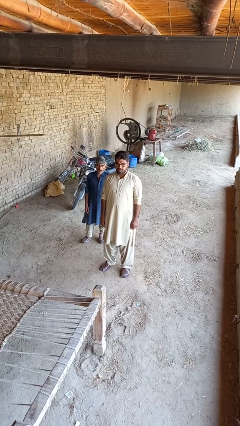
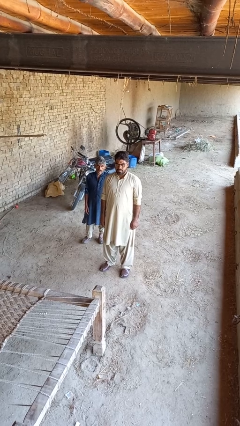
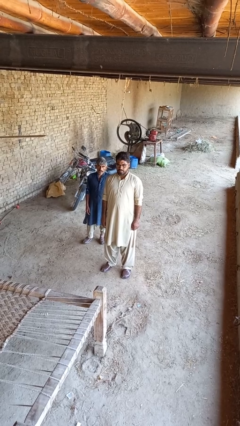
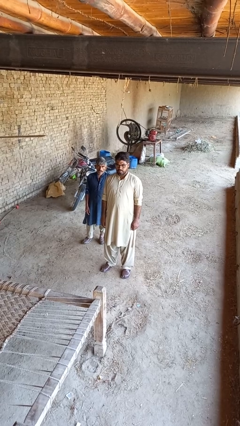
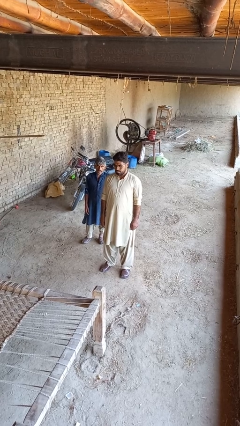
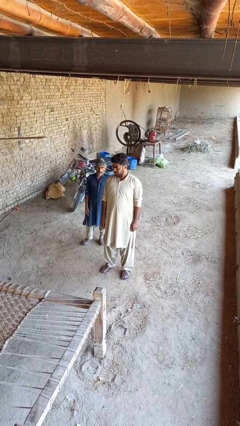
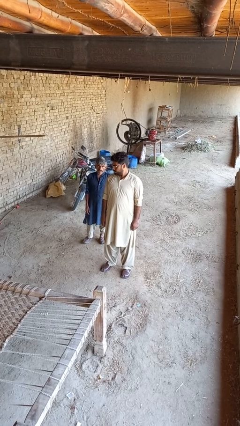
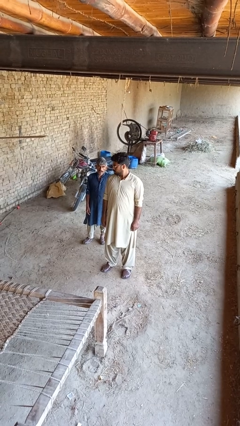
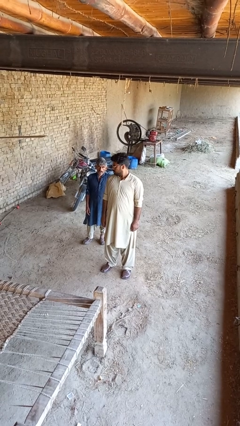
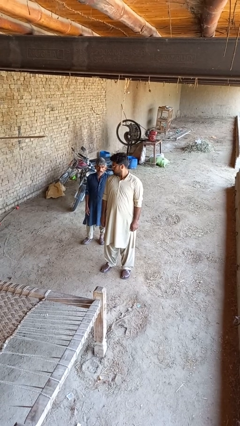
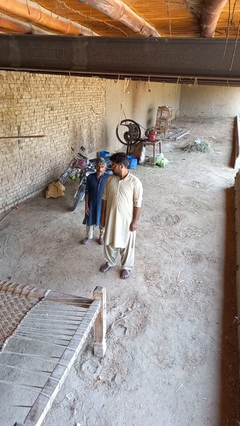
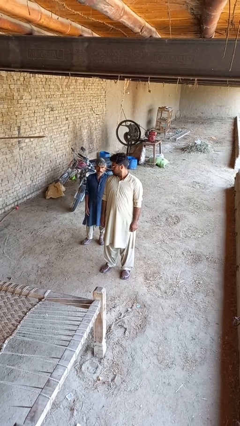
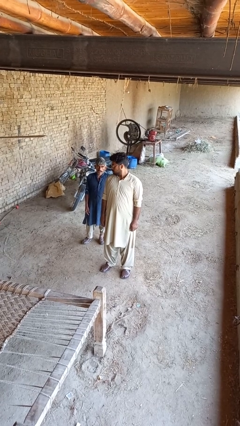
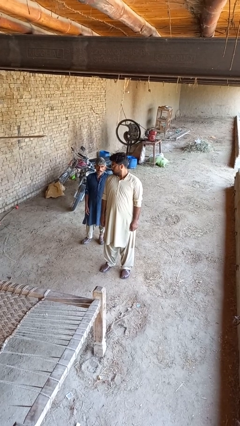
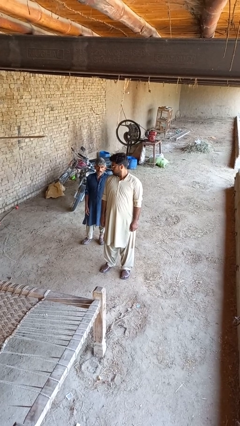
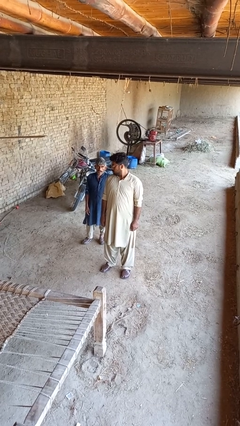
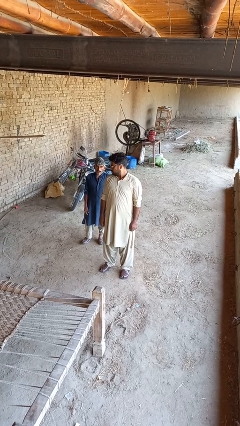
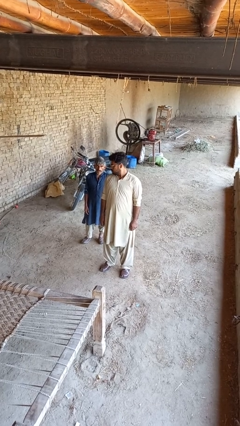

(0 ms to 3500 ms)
person looks over shoulder

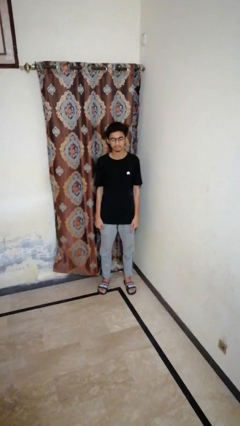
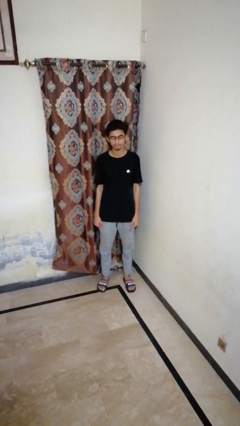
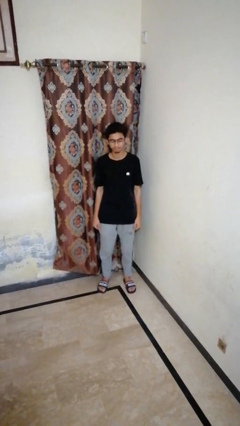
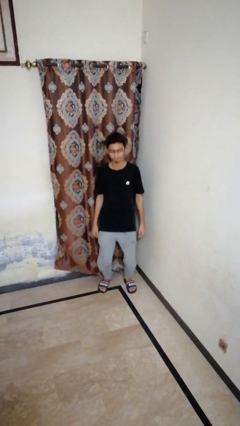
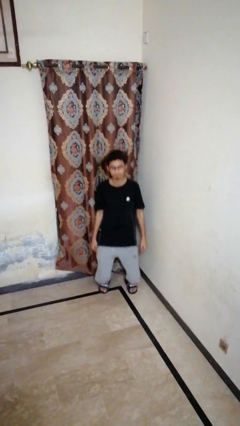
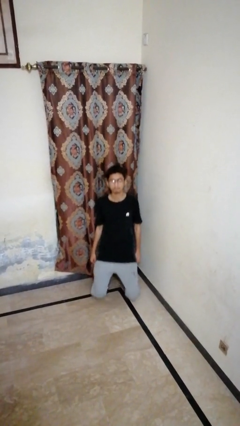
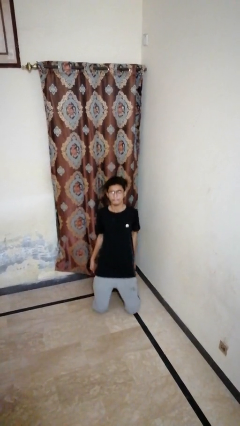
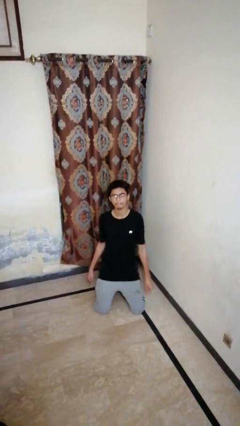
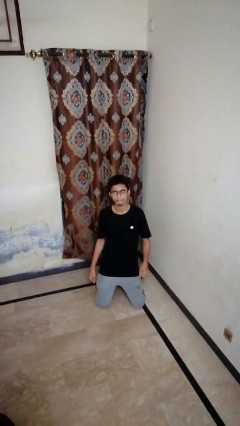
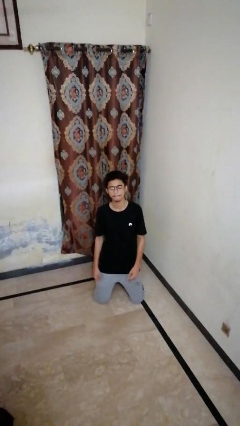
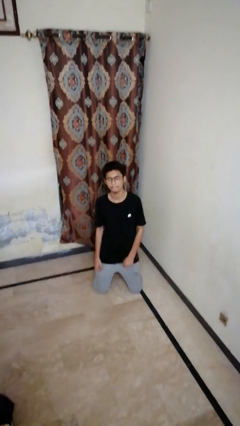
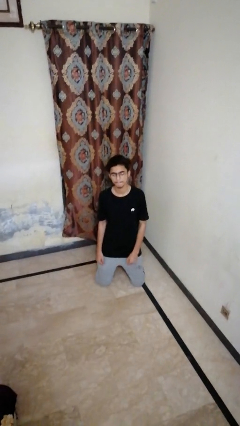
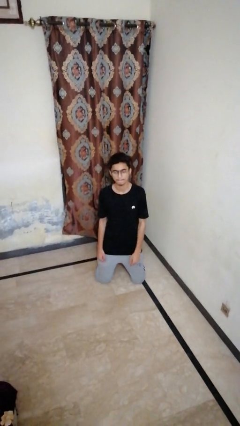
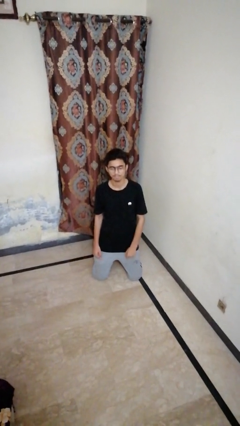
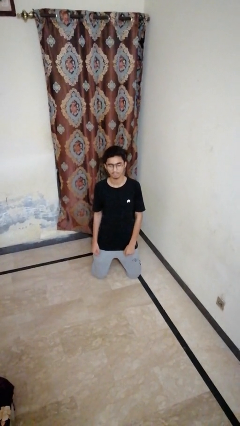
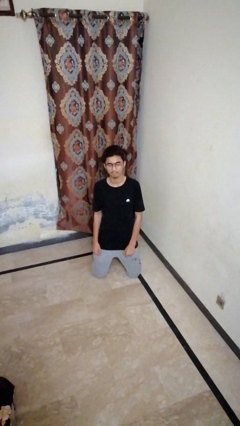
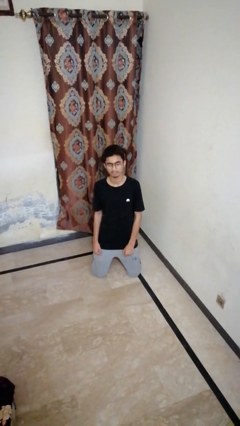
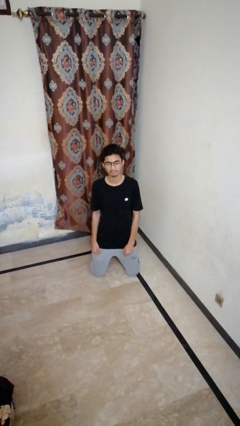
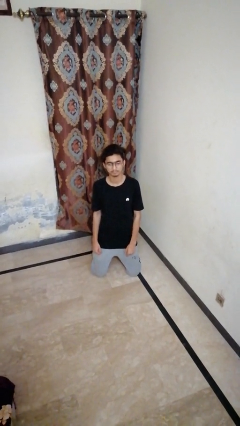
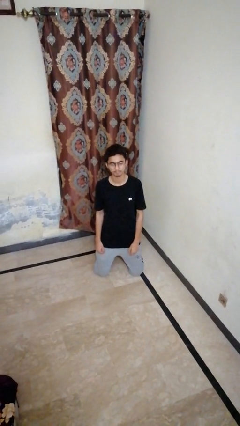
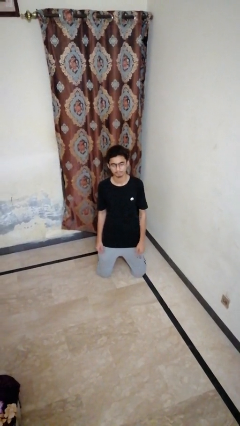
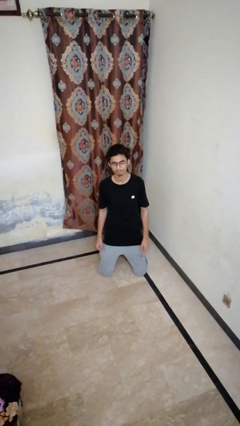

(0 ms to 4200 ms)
person kneels

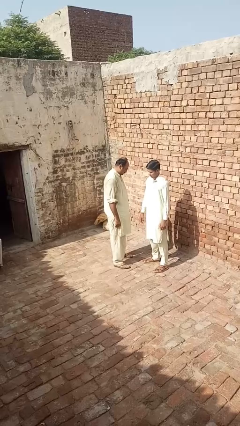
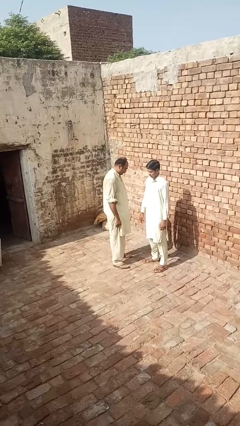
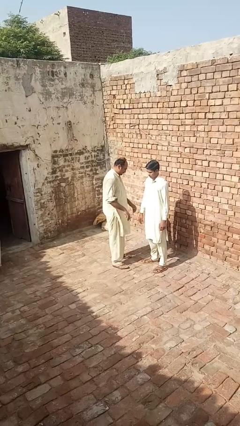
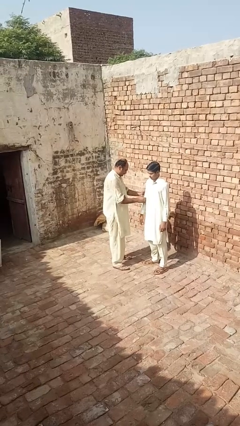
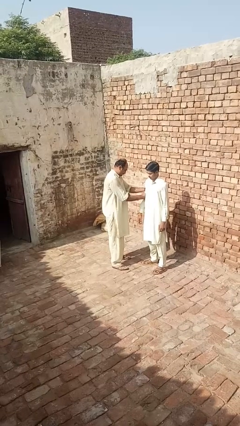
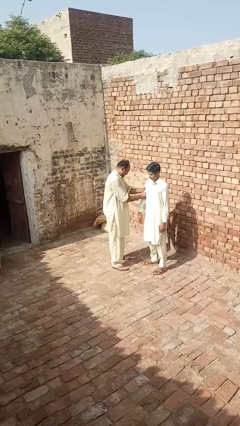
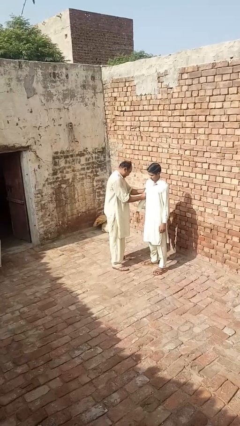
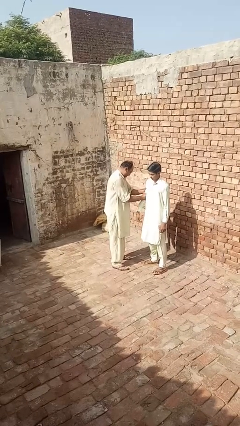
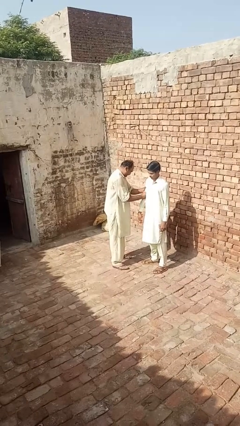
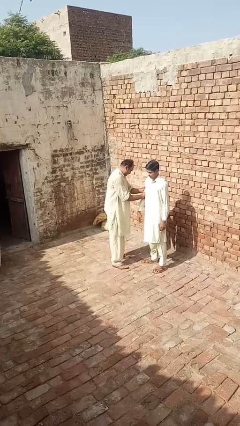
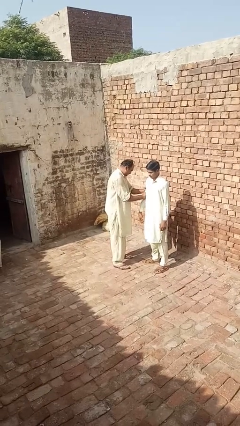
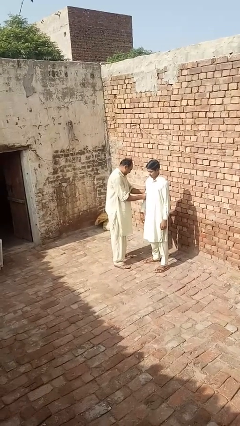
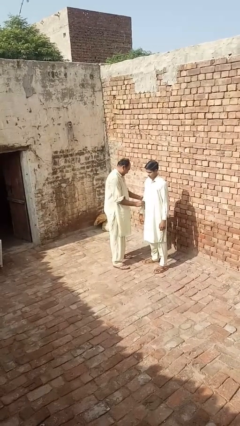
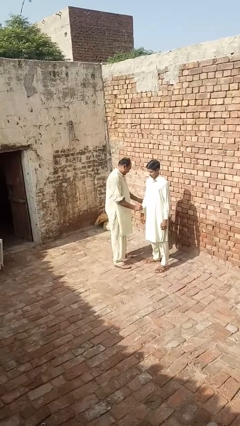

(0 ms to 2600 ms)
person grabs person by bicep

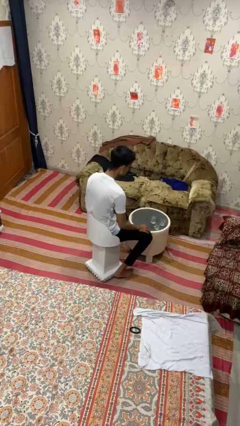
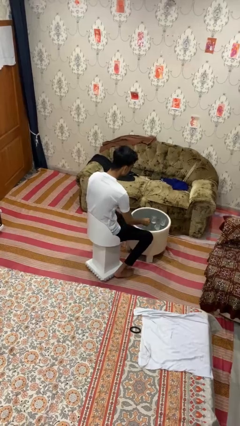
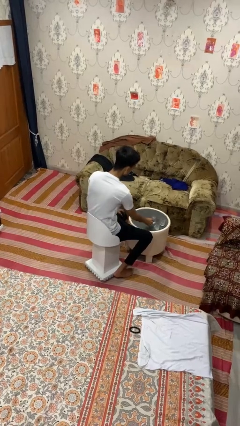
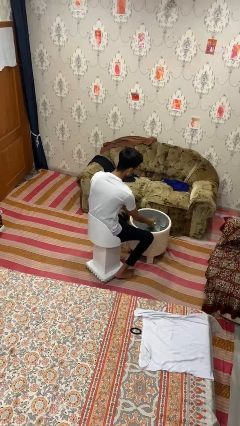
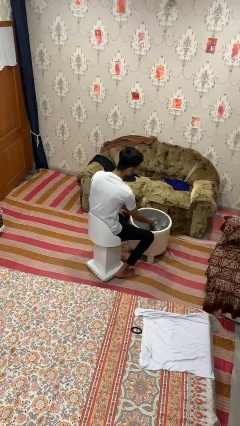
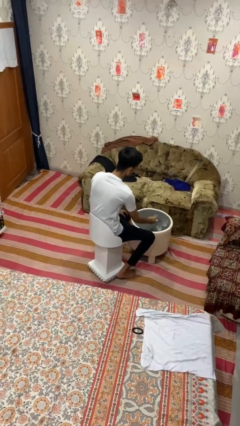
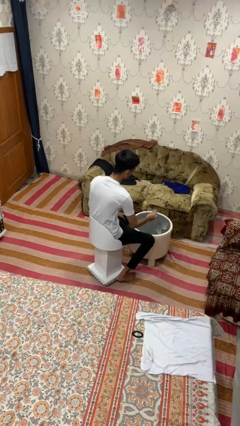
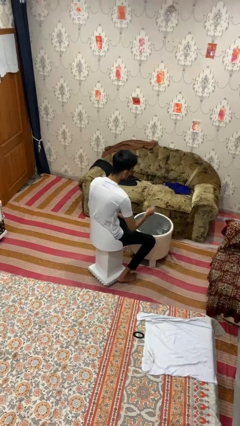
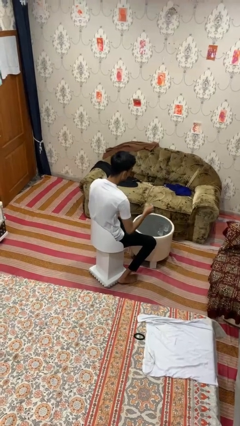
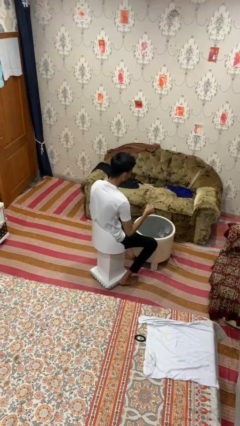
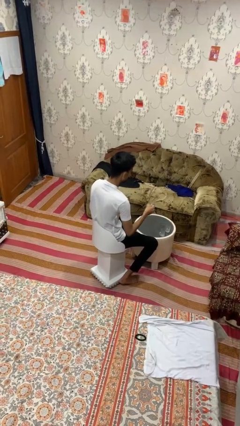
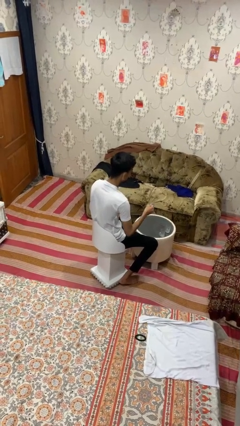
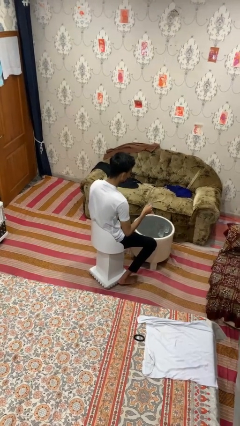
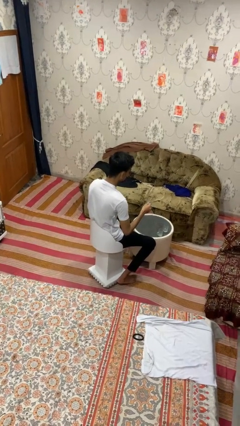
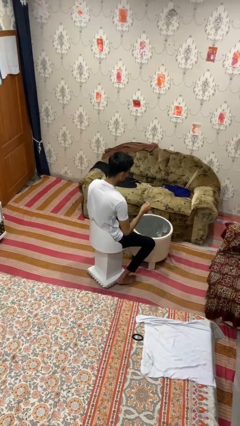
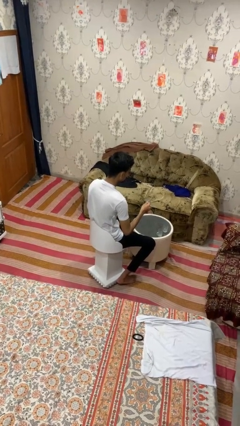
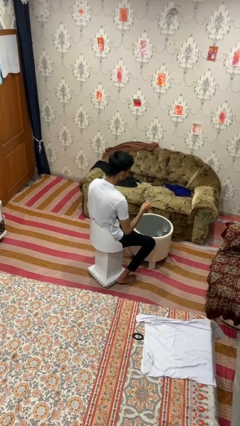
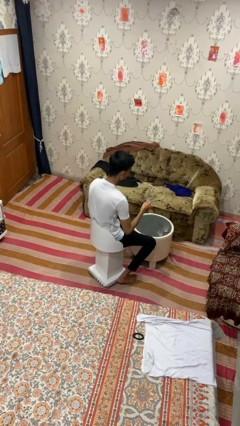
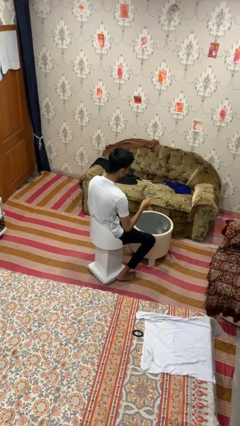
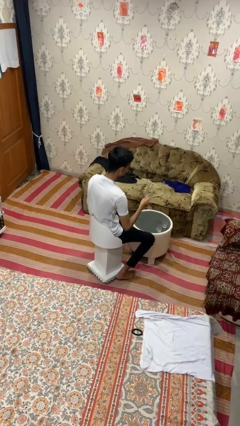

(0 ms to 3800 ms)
person picks up object from table

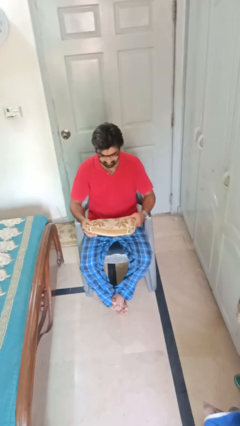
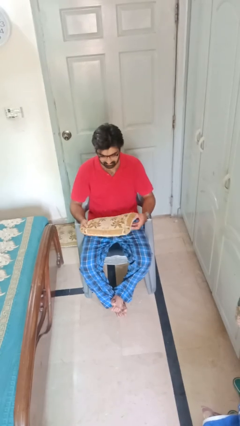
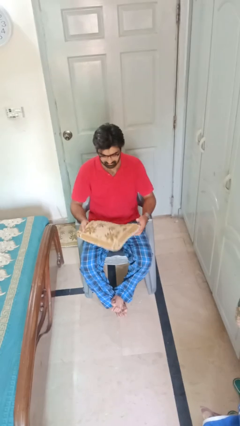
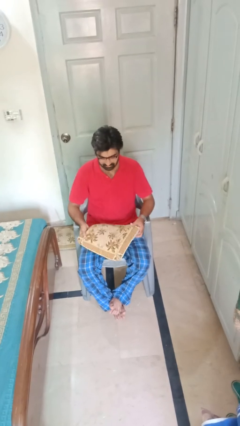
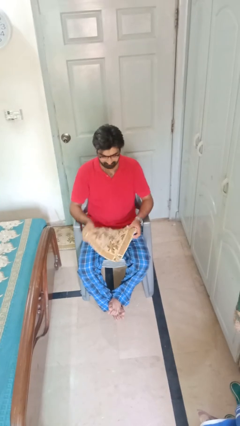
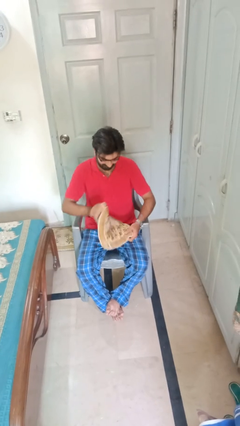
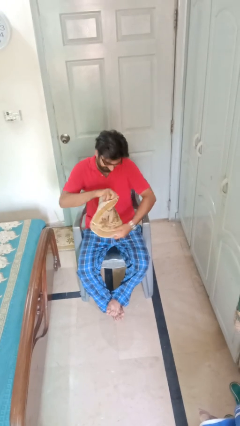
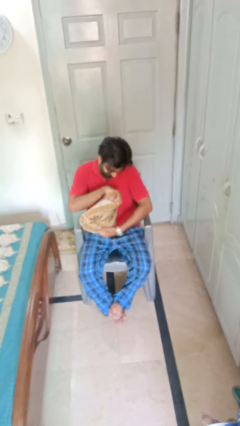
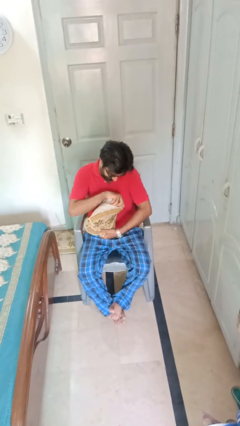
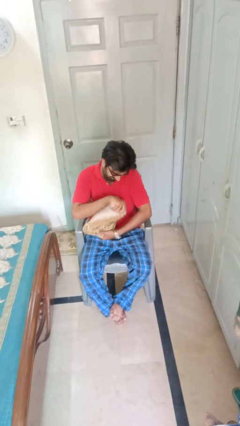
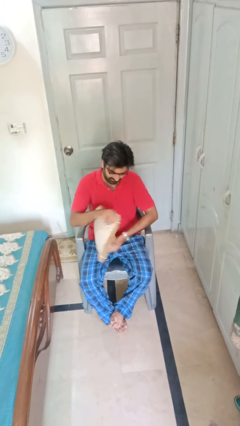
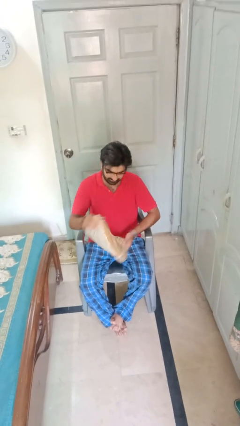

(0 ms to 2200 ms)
person squeezes object

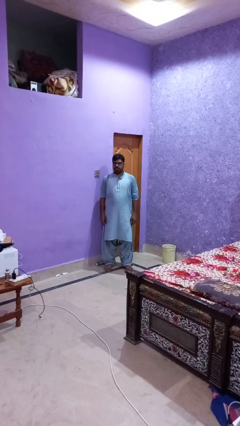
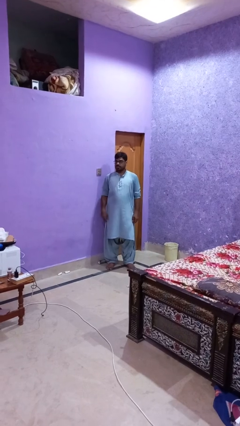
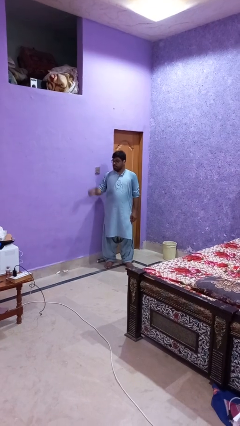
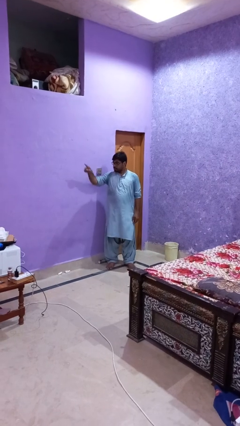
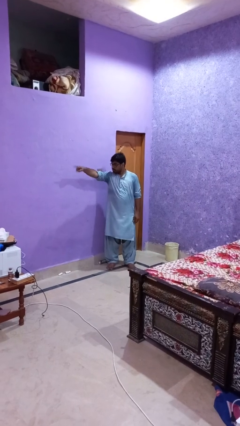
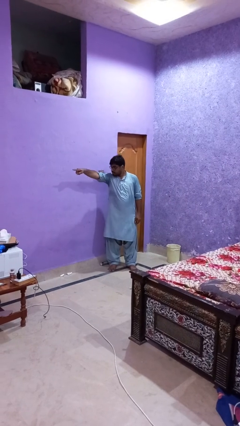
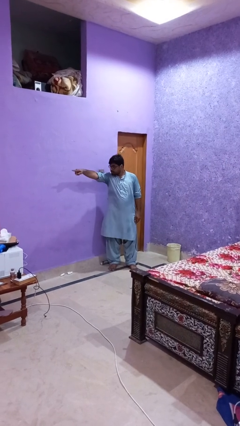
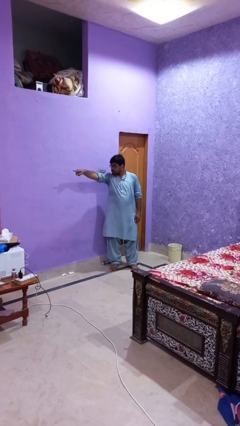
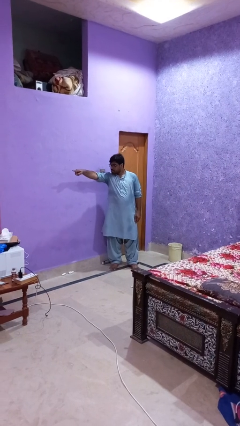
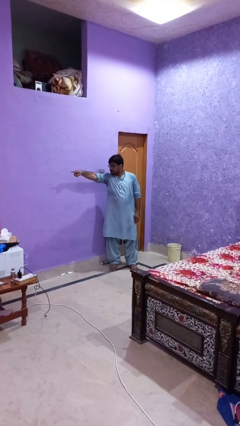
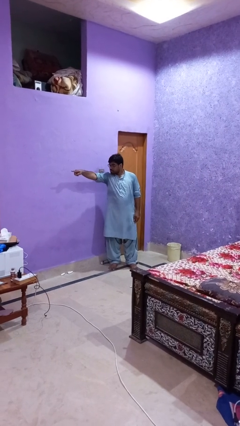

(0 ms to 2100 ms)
person points at person
